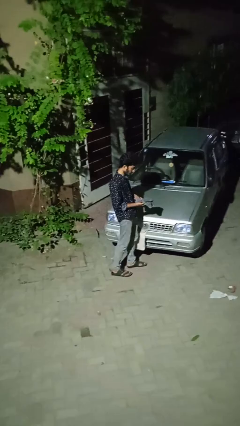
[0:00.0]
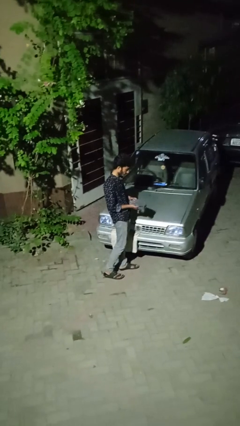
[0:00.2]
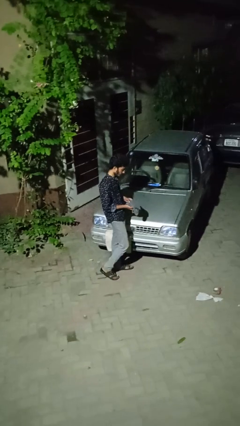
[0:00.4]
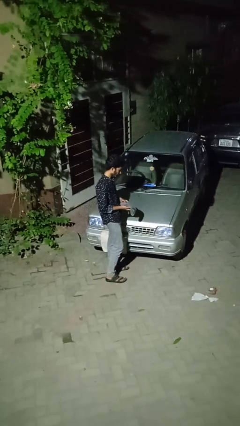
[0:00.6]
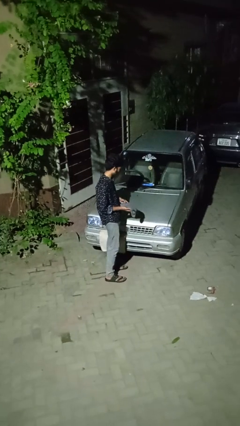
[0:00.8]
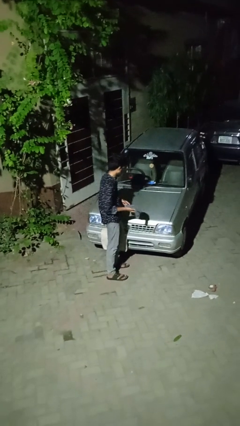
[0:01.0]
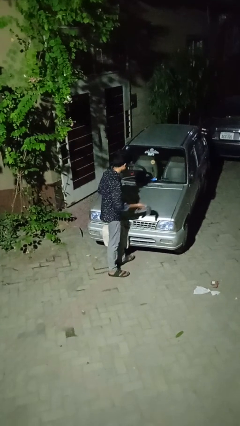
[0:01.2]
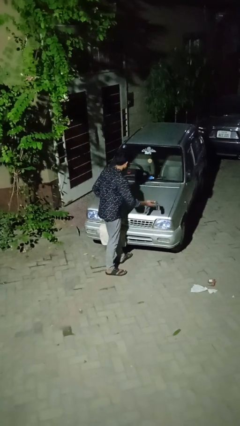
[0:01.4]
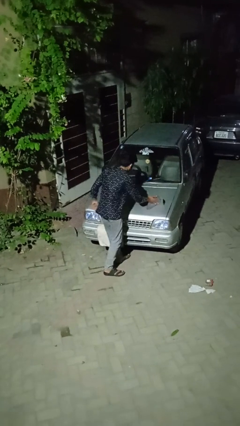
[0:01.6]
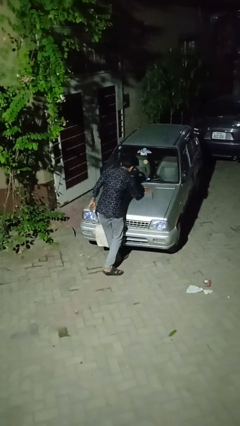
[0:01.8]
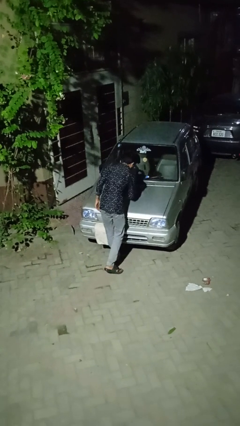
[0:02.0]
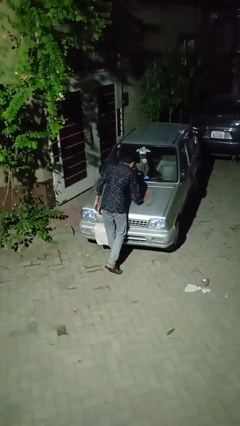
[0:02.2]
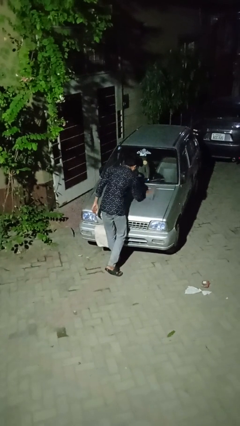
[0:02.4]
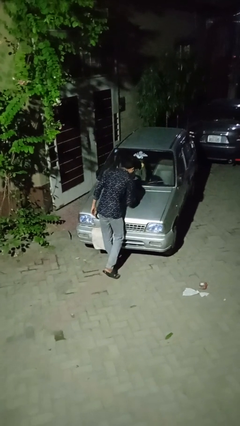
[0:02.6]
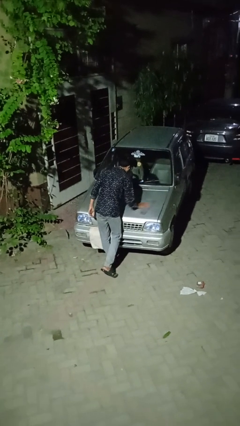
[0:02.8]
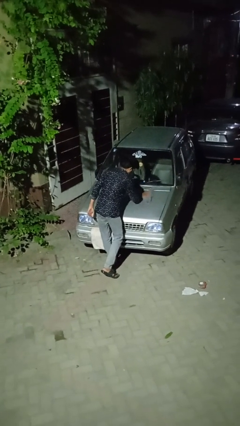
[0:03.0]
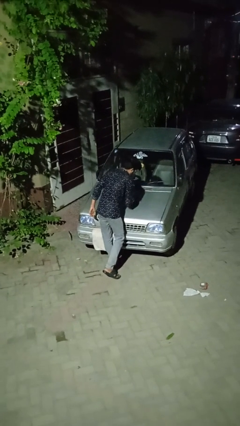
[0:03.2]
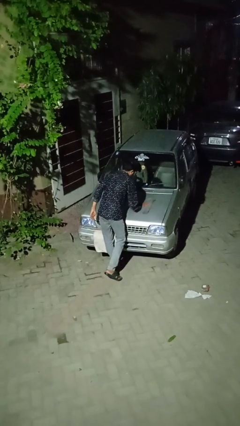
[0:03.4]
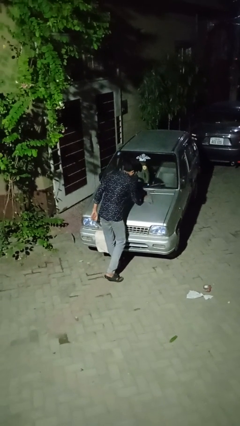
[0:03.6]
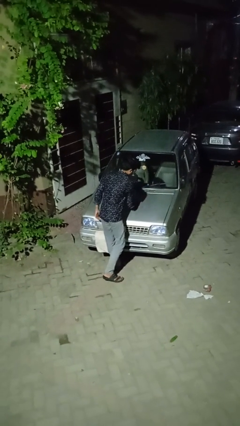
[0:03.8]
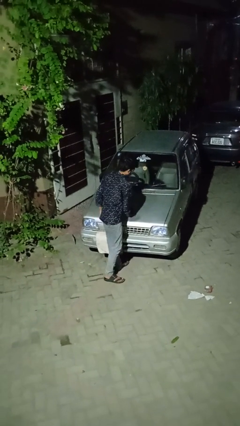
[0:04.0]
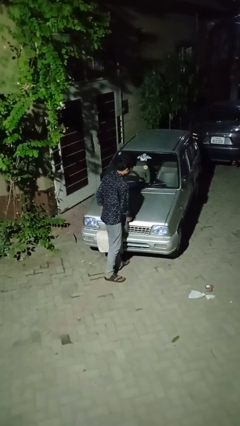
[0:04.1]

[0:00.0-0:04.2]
person polishes car with rag

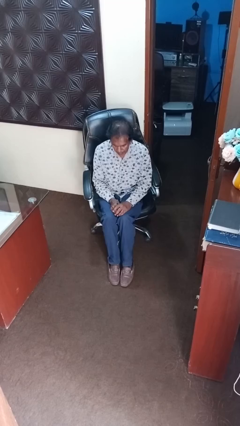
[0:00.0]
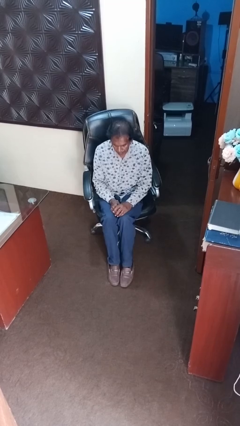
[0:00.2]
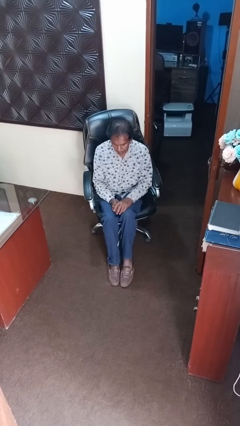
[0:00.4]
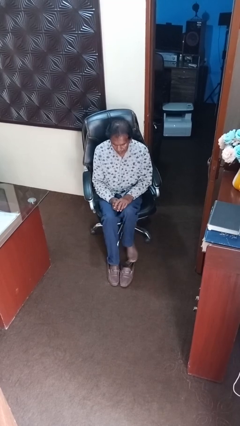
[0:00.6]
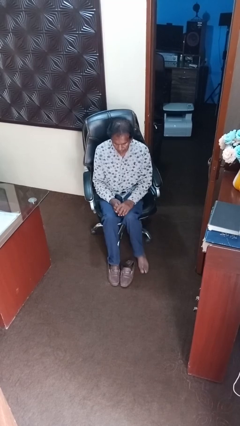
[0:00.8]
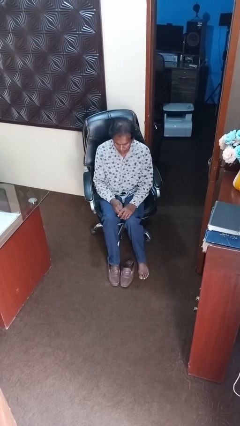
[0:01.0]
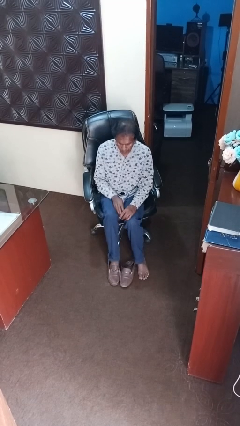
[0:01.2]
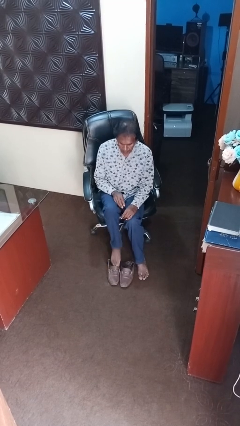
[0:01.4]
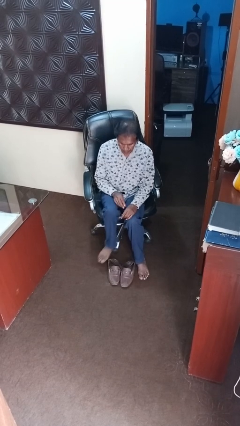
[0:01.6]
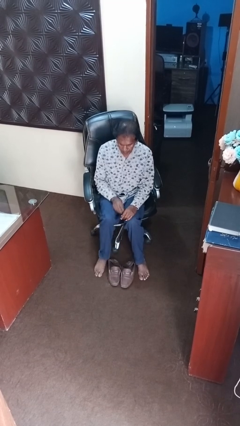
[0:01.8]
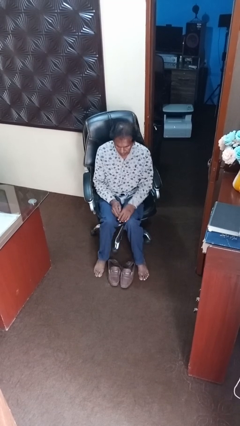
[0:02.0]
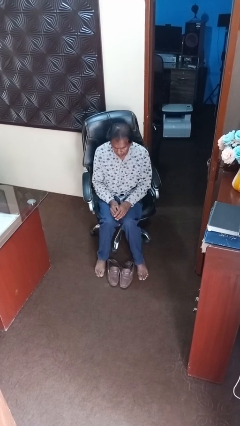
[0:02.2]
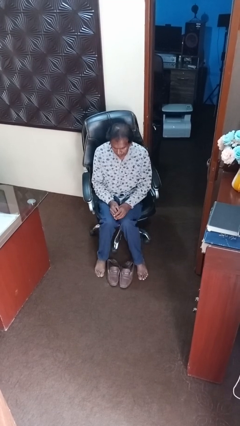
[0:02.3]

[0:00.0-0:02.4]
person takes off shoes

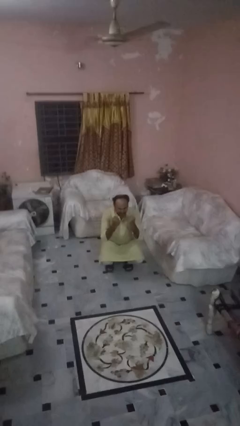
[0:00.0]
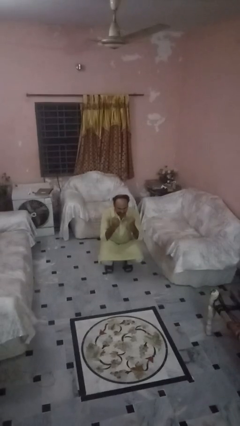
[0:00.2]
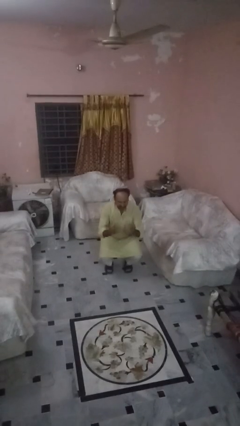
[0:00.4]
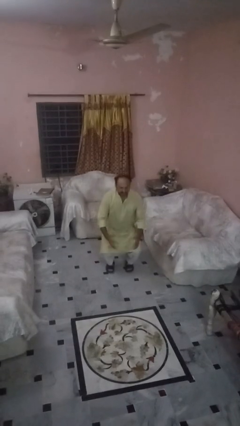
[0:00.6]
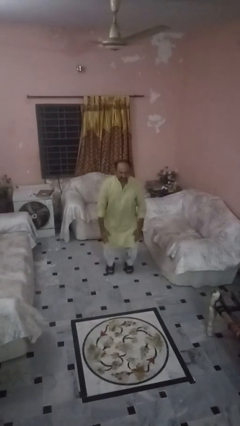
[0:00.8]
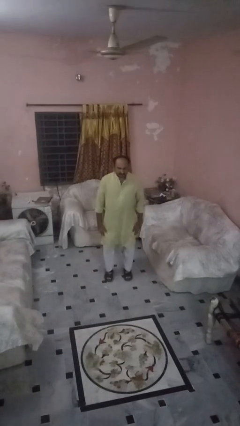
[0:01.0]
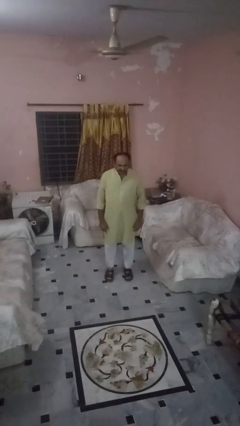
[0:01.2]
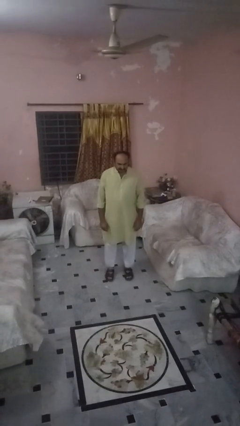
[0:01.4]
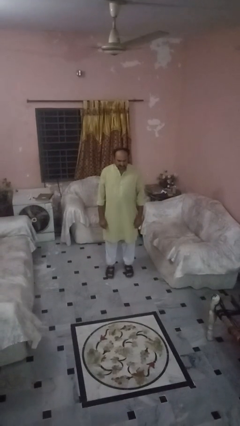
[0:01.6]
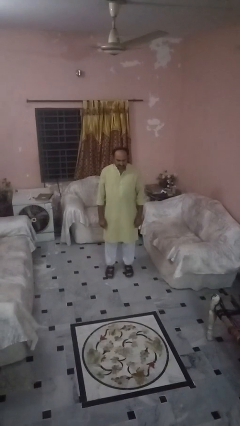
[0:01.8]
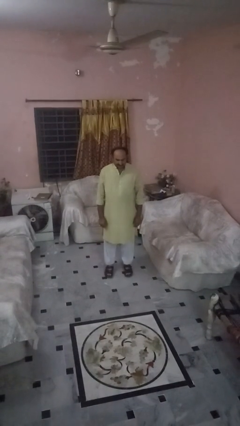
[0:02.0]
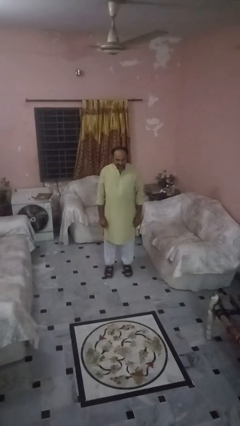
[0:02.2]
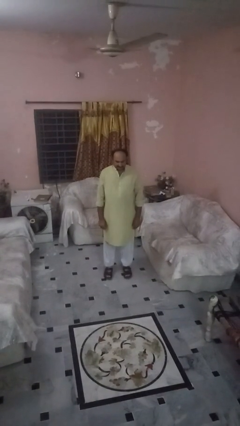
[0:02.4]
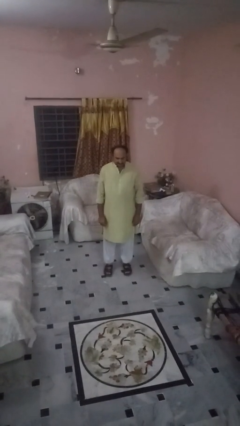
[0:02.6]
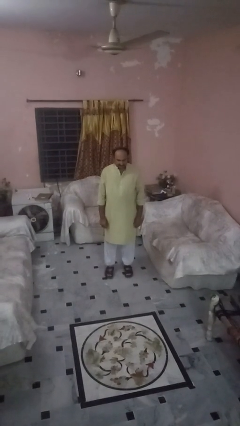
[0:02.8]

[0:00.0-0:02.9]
person stands up

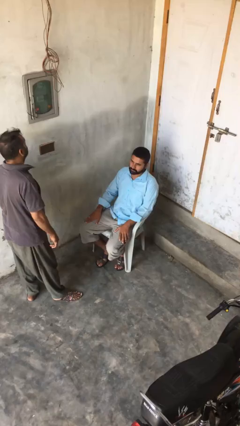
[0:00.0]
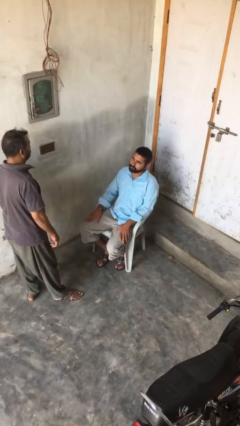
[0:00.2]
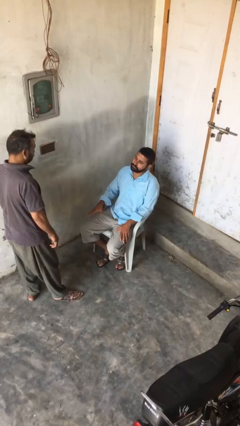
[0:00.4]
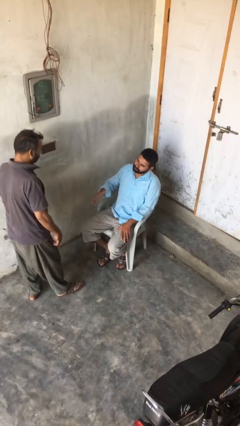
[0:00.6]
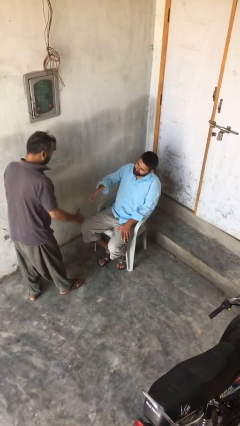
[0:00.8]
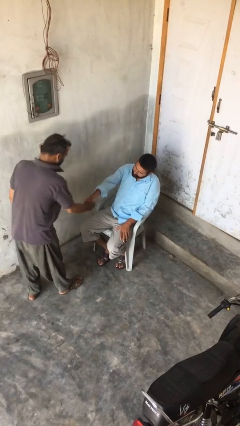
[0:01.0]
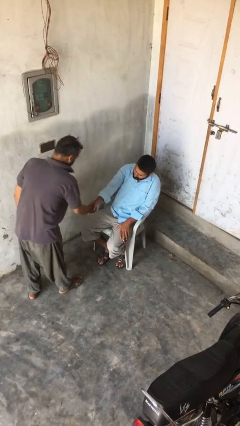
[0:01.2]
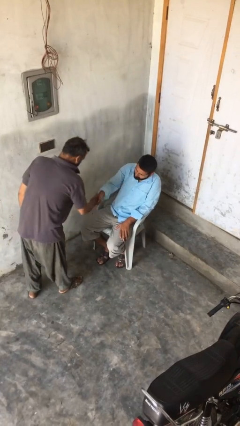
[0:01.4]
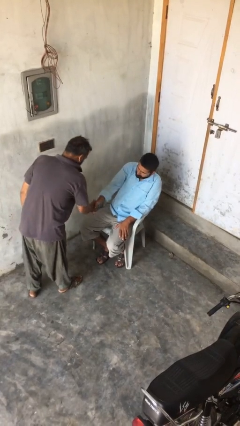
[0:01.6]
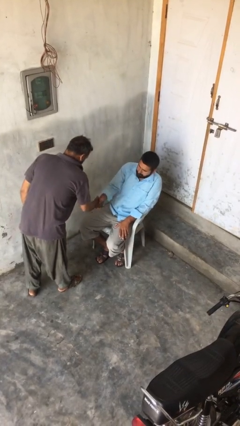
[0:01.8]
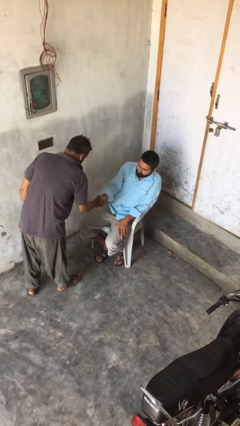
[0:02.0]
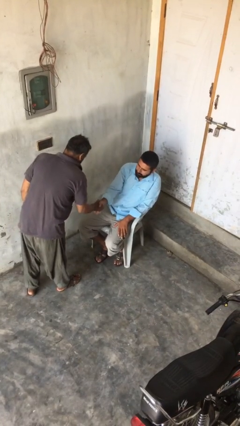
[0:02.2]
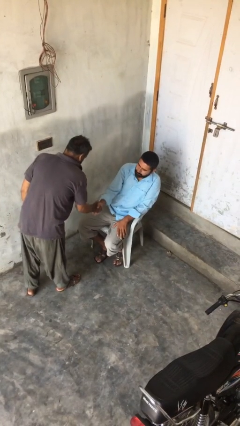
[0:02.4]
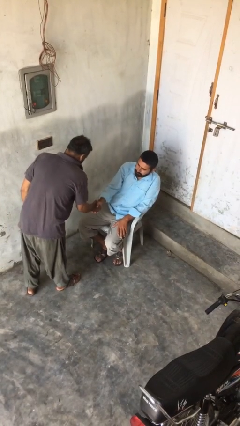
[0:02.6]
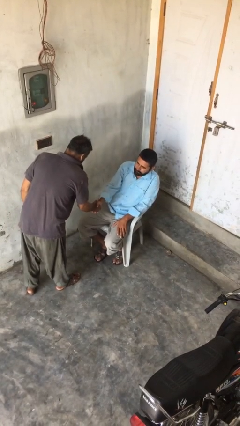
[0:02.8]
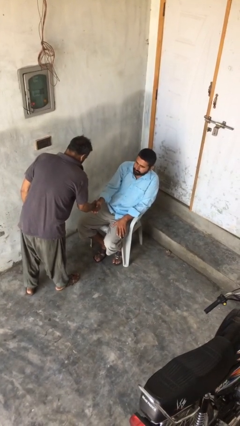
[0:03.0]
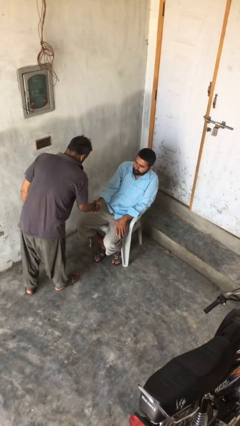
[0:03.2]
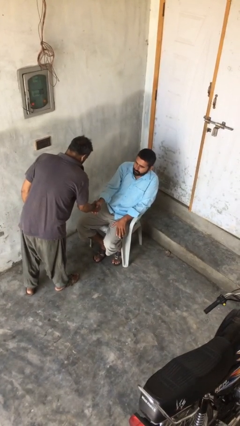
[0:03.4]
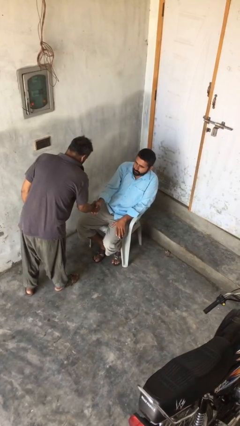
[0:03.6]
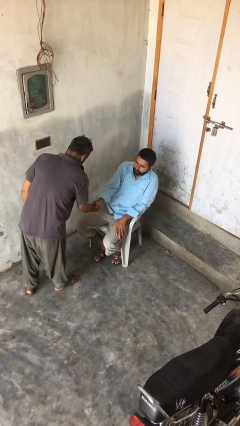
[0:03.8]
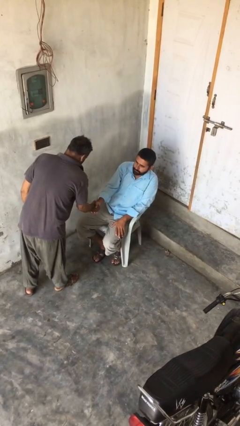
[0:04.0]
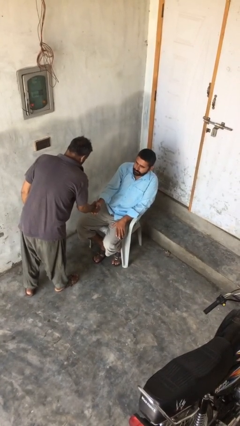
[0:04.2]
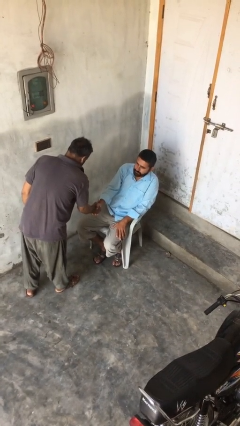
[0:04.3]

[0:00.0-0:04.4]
person shakes hand

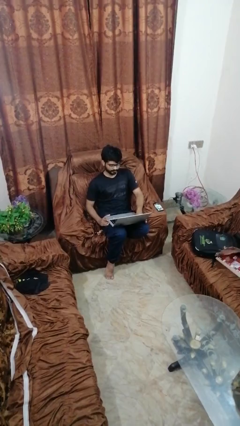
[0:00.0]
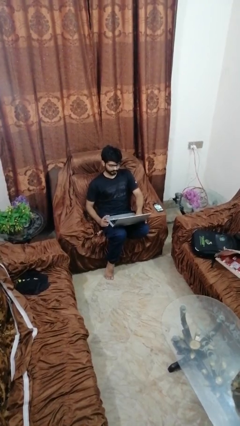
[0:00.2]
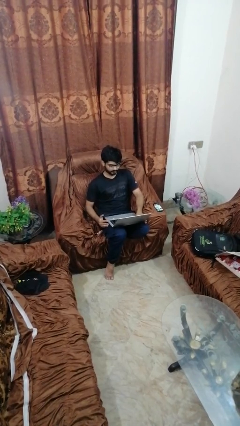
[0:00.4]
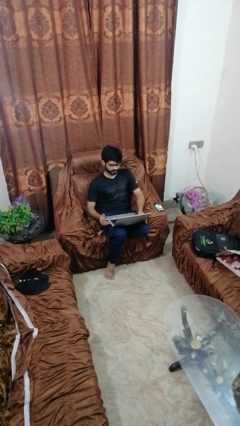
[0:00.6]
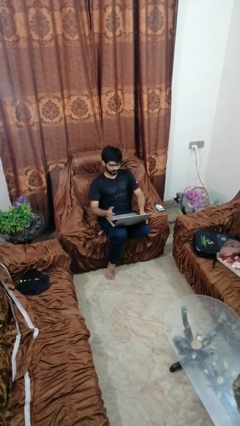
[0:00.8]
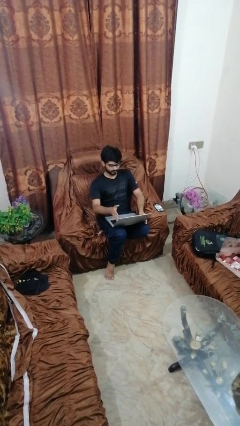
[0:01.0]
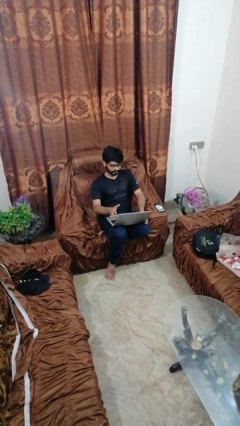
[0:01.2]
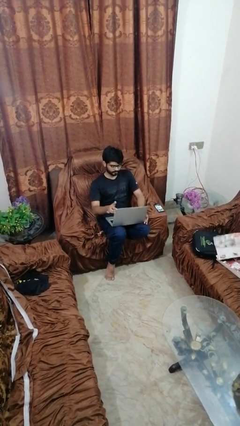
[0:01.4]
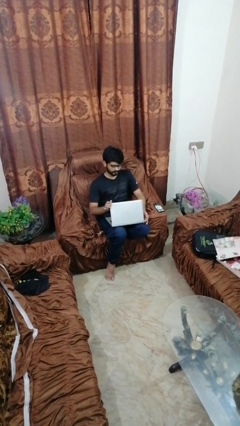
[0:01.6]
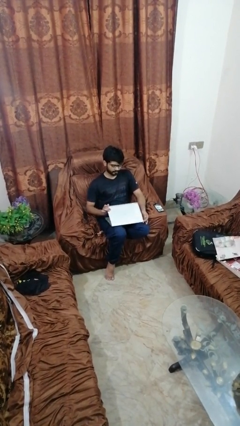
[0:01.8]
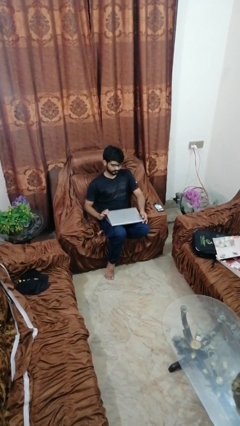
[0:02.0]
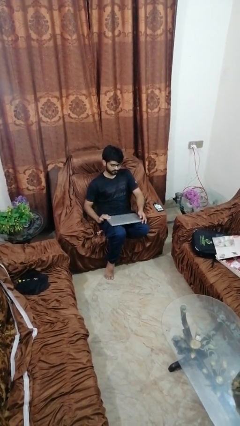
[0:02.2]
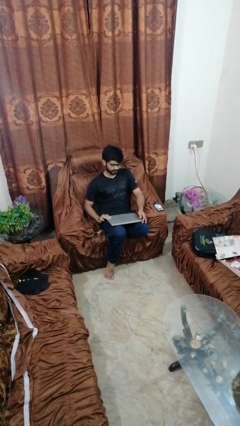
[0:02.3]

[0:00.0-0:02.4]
person closes laptop

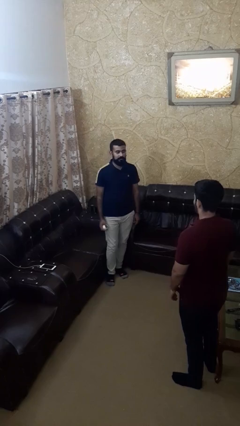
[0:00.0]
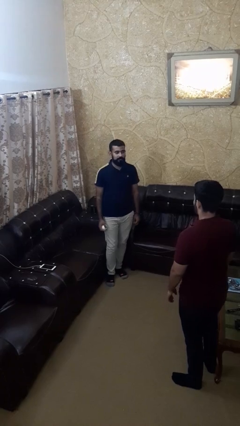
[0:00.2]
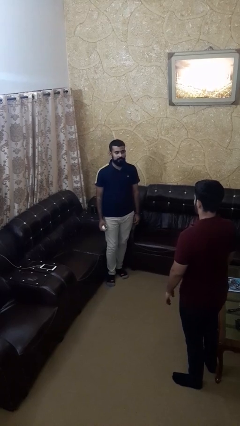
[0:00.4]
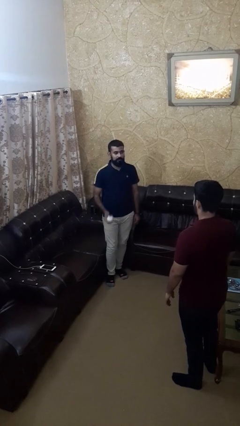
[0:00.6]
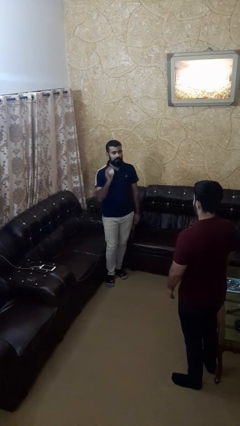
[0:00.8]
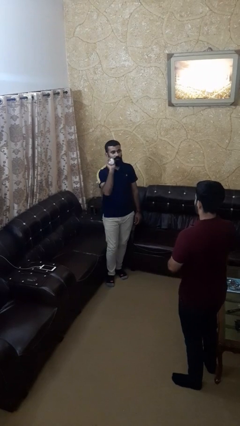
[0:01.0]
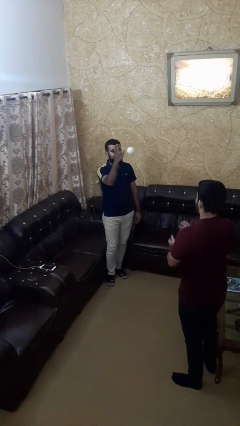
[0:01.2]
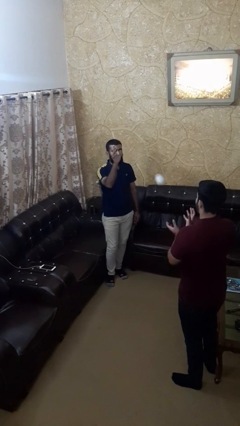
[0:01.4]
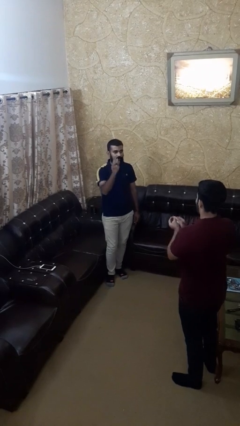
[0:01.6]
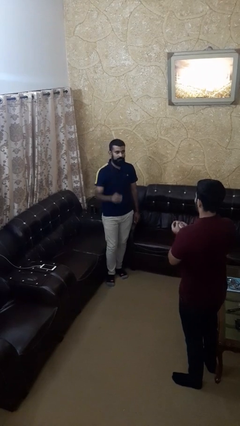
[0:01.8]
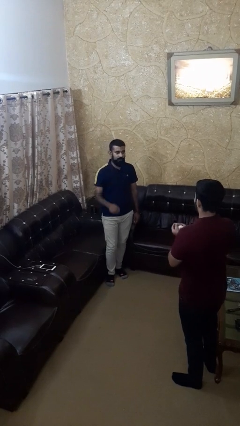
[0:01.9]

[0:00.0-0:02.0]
person throws object to person
